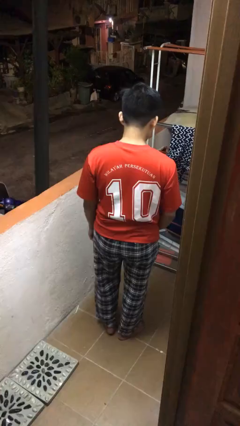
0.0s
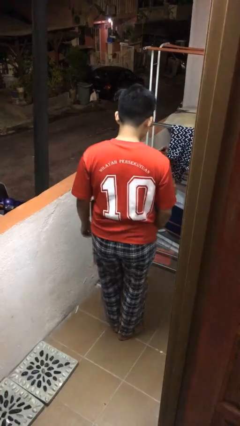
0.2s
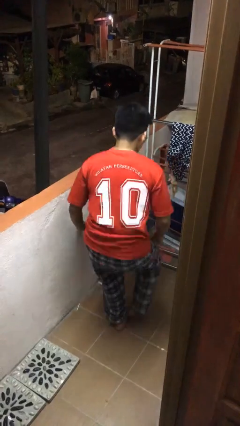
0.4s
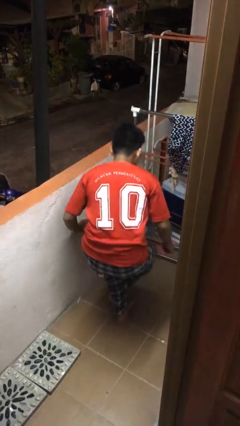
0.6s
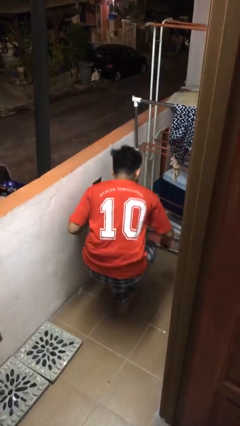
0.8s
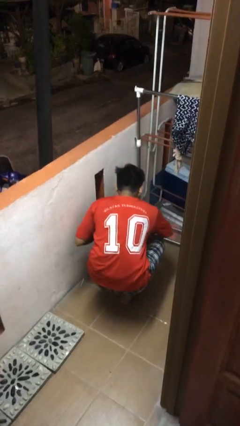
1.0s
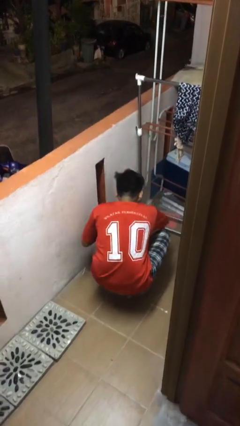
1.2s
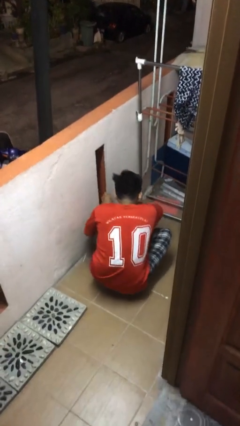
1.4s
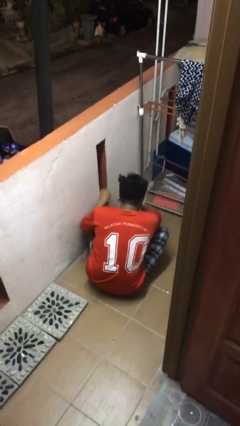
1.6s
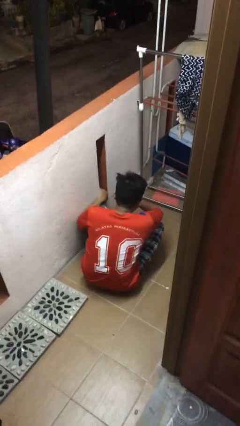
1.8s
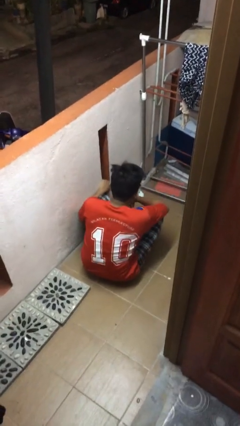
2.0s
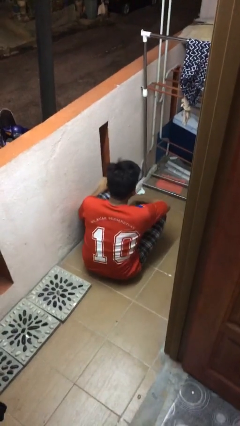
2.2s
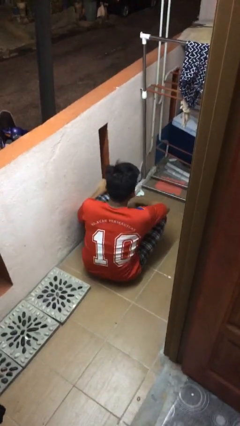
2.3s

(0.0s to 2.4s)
person sits crisscross

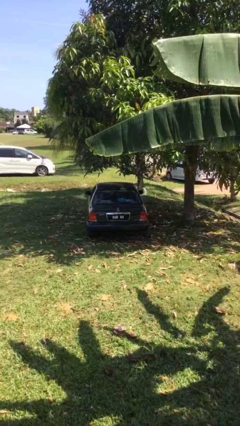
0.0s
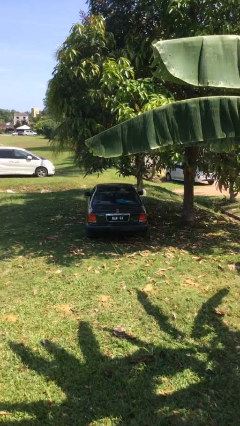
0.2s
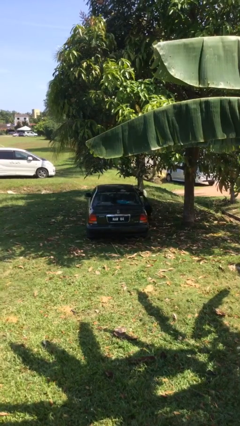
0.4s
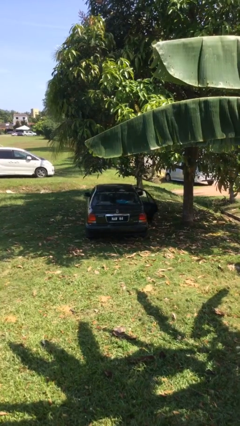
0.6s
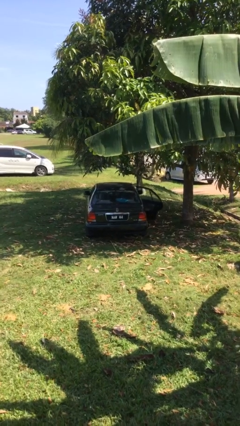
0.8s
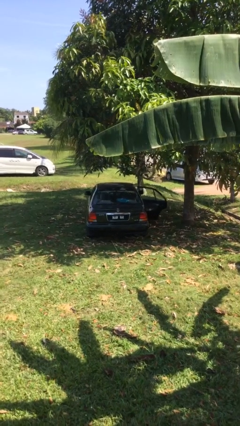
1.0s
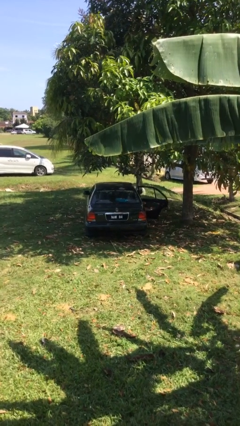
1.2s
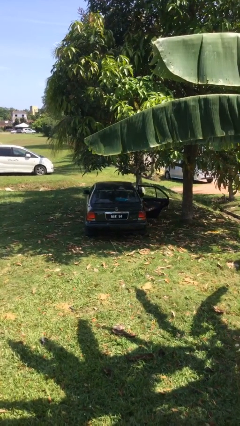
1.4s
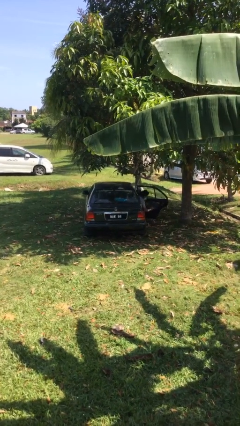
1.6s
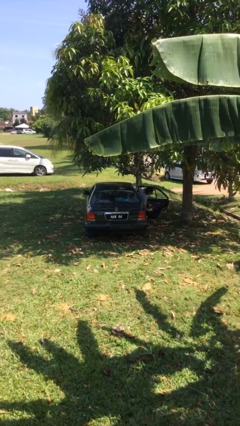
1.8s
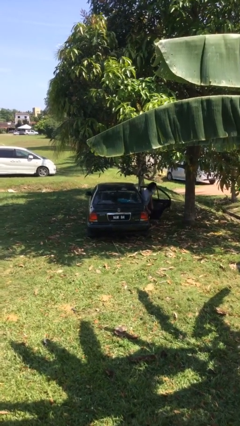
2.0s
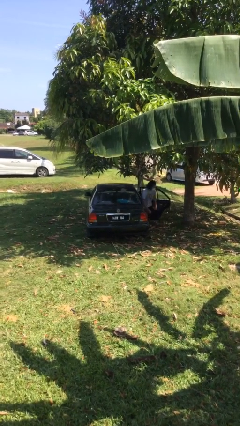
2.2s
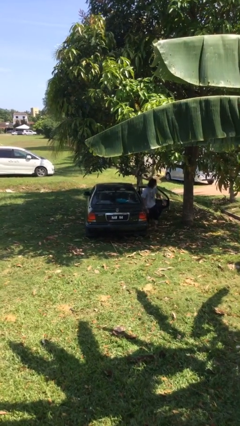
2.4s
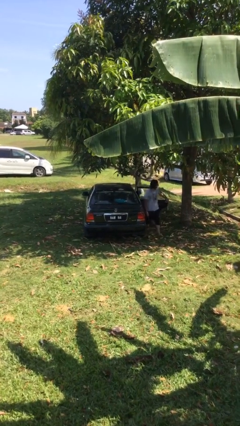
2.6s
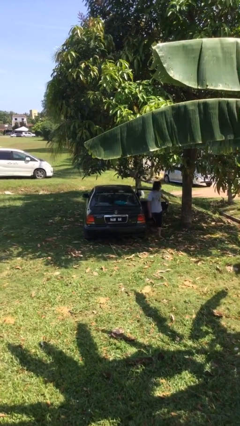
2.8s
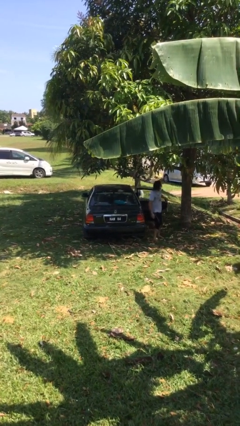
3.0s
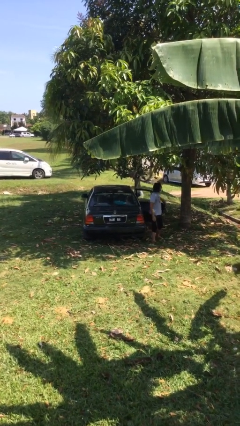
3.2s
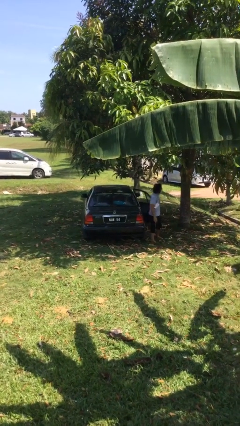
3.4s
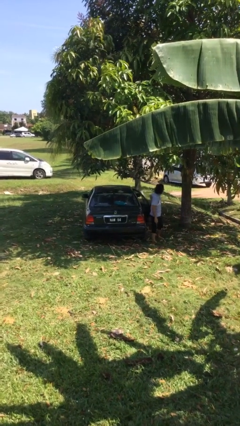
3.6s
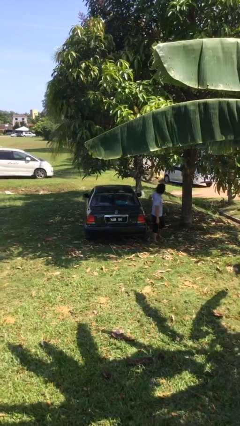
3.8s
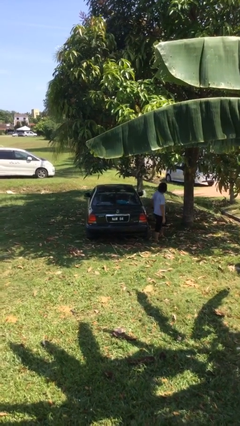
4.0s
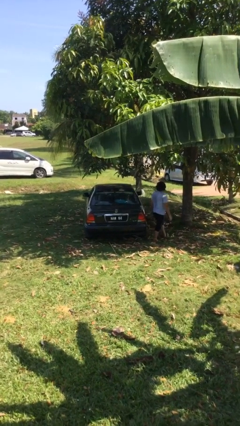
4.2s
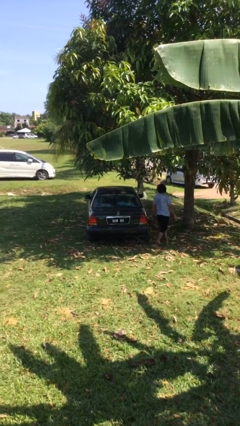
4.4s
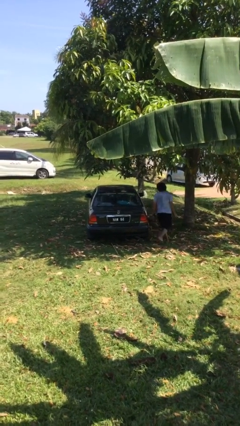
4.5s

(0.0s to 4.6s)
car drops off person

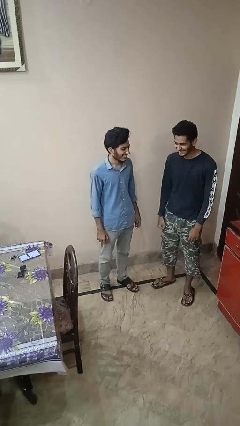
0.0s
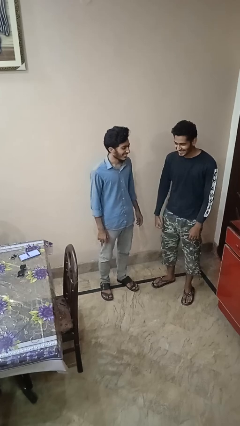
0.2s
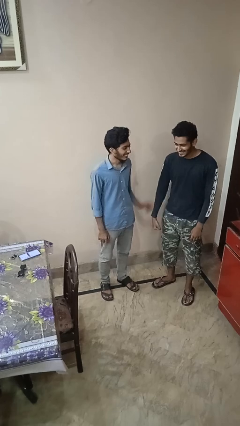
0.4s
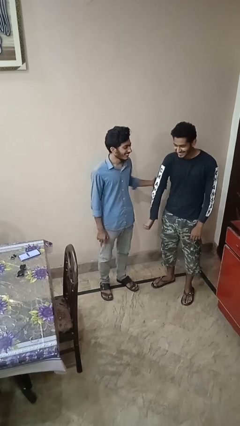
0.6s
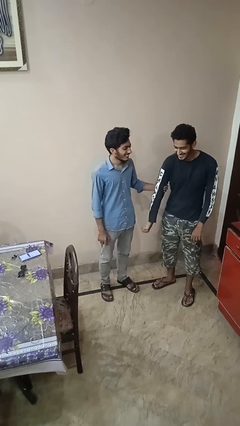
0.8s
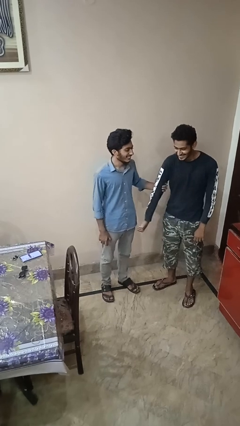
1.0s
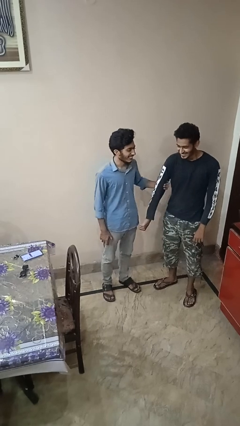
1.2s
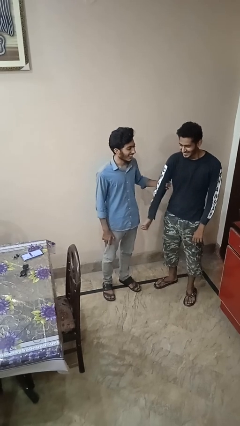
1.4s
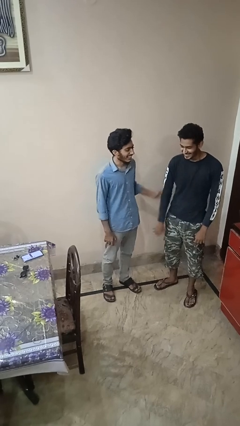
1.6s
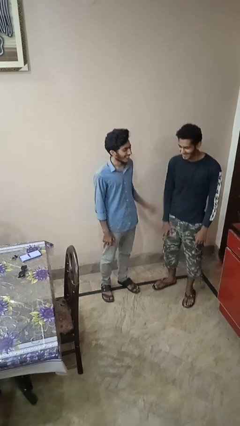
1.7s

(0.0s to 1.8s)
person grabs person by bicep

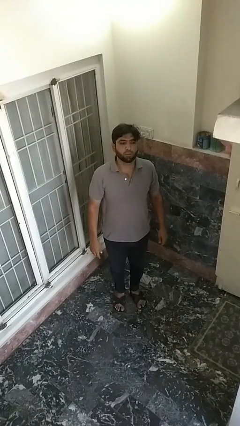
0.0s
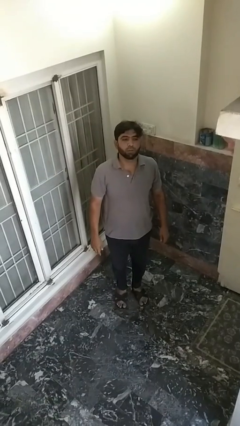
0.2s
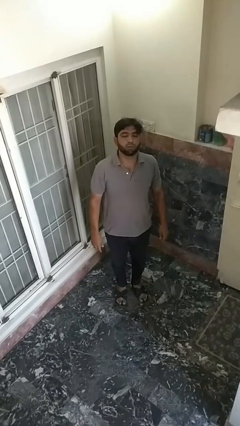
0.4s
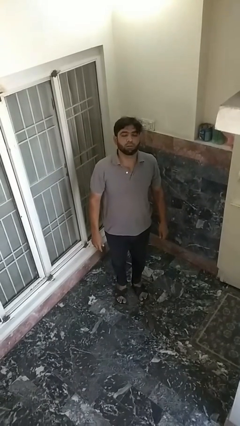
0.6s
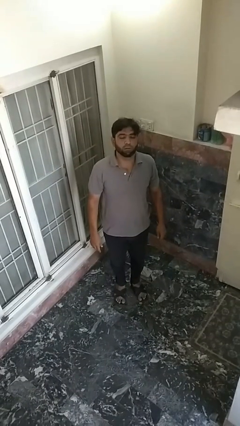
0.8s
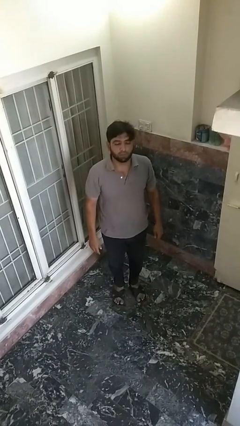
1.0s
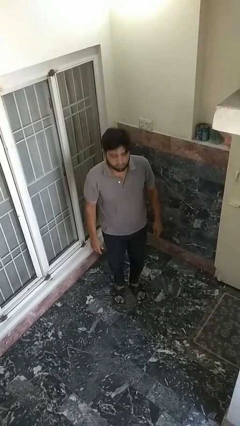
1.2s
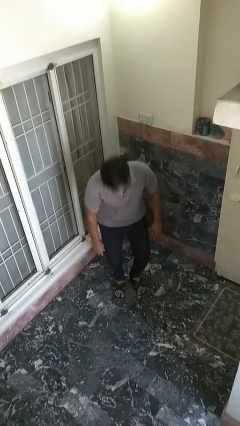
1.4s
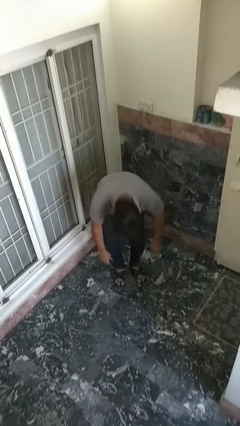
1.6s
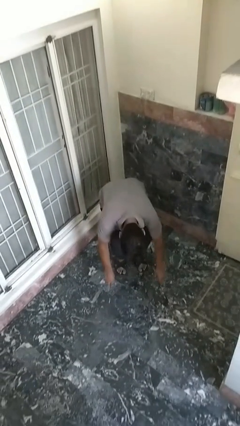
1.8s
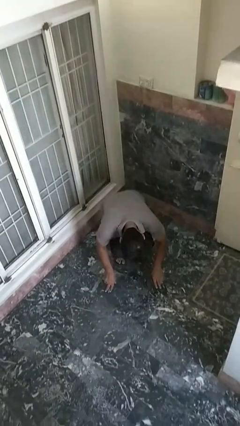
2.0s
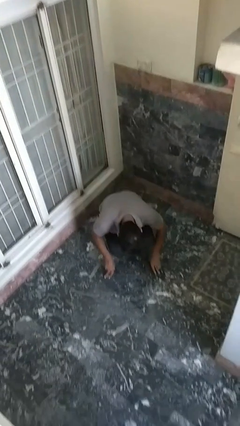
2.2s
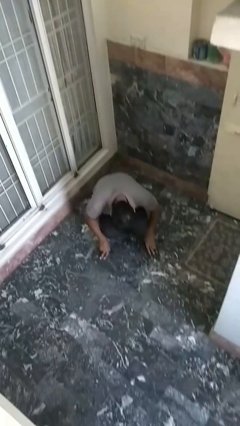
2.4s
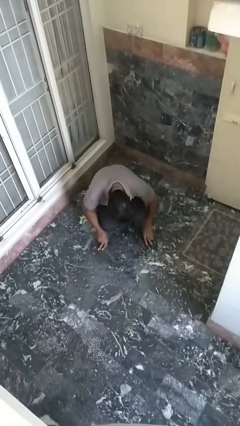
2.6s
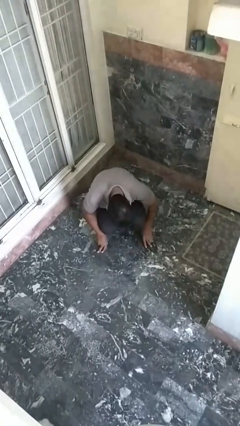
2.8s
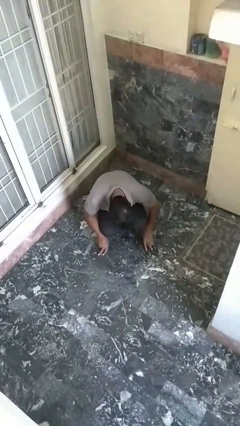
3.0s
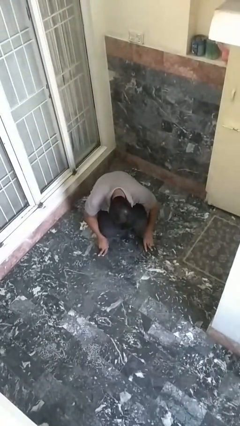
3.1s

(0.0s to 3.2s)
person falls while standing

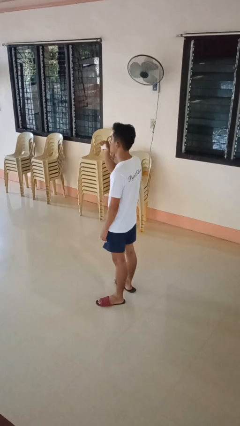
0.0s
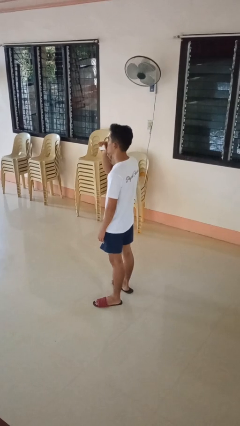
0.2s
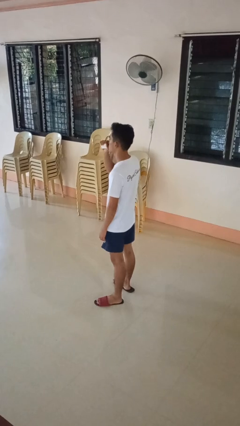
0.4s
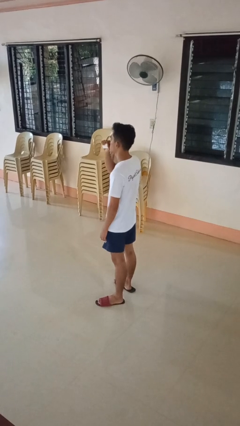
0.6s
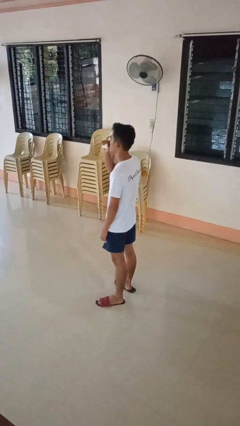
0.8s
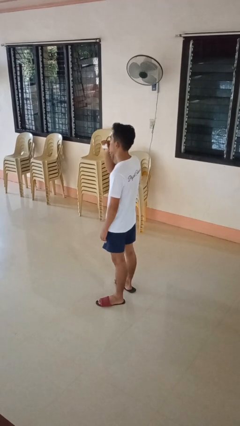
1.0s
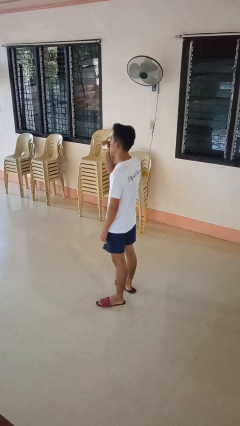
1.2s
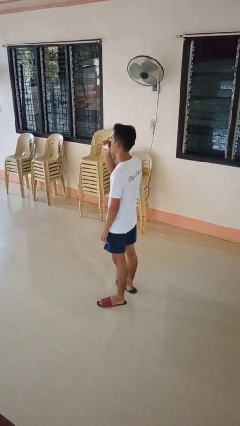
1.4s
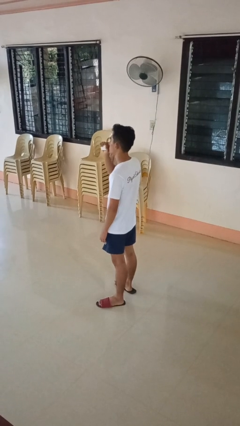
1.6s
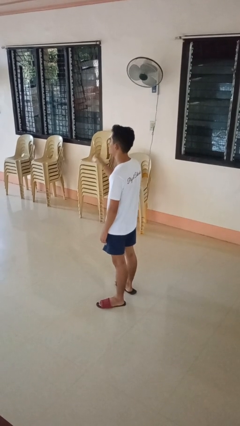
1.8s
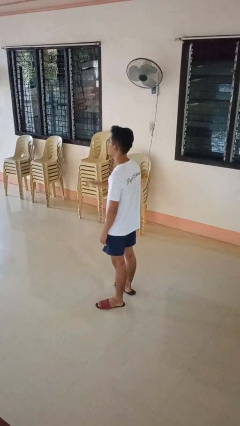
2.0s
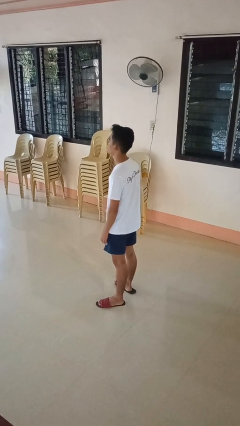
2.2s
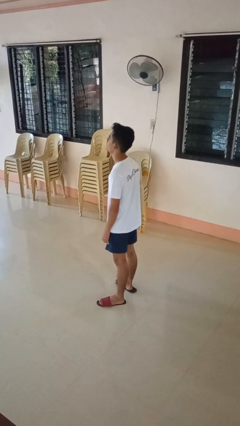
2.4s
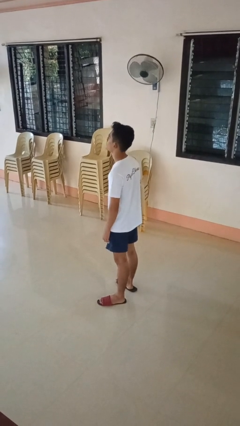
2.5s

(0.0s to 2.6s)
person vapes

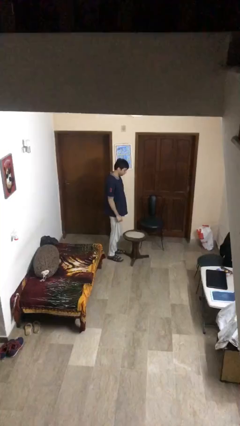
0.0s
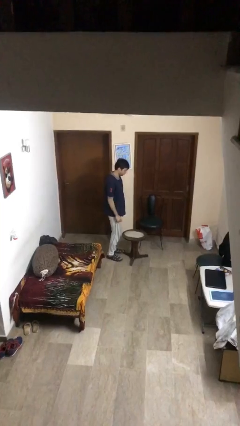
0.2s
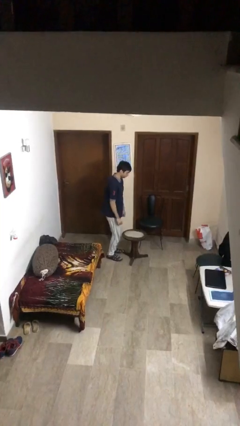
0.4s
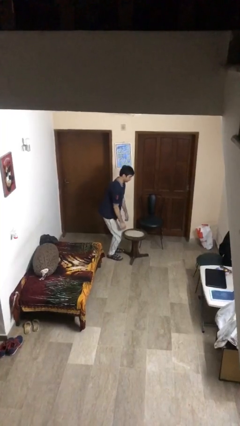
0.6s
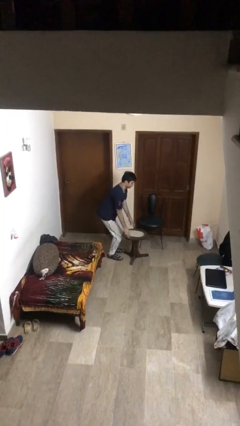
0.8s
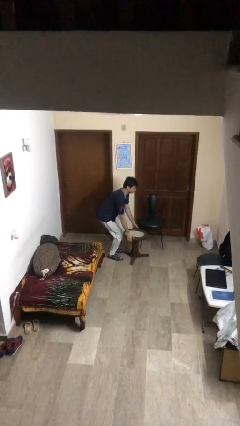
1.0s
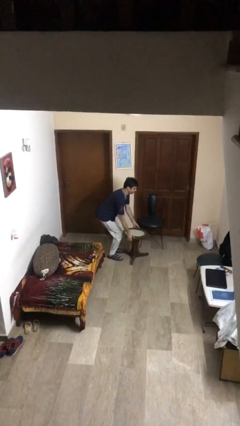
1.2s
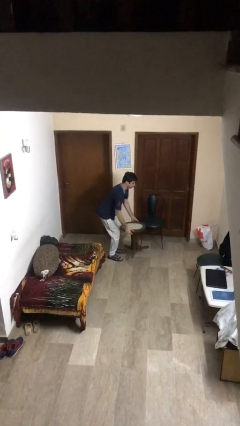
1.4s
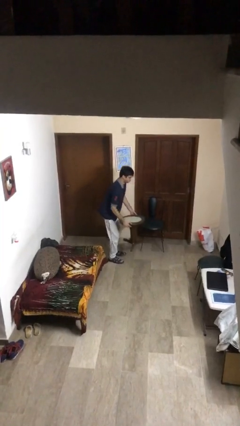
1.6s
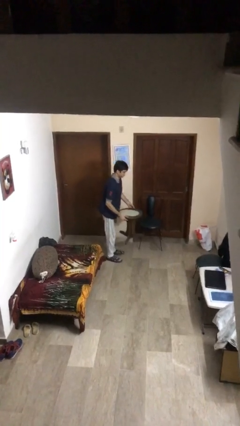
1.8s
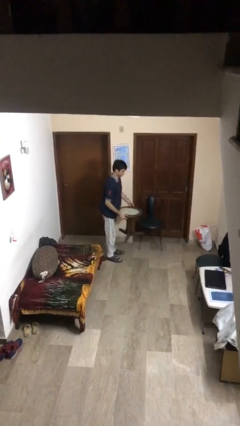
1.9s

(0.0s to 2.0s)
person picks up object from floor

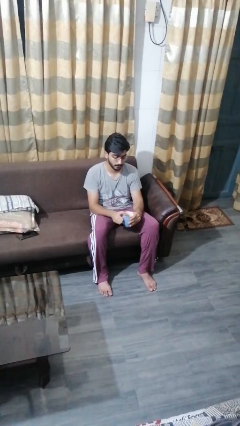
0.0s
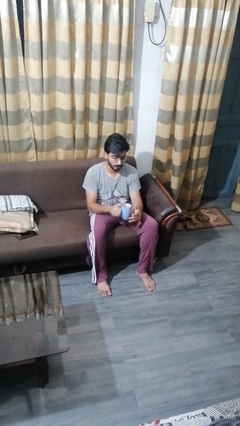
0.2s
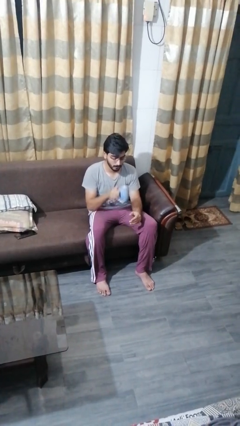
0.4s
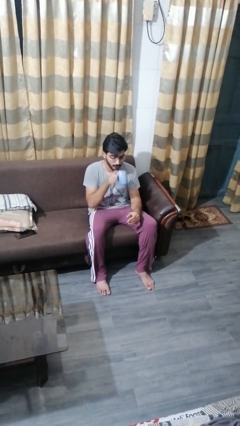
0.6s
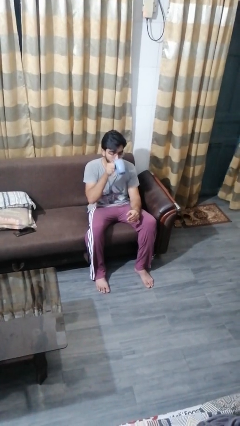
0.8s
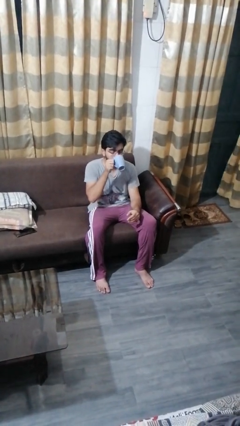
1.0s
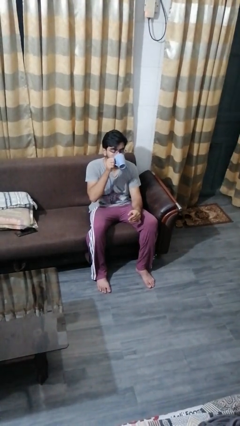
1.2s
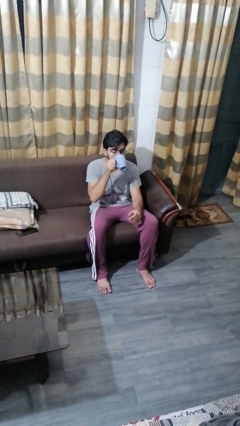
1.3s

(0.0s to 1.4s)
person drinks from mug
